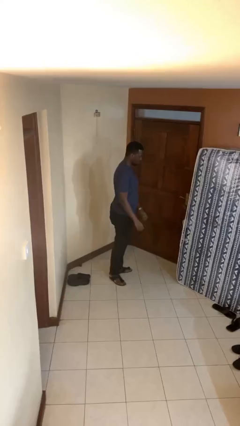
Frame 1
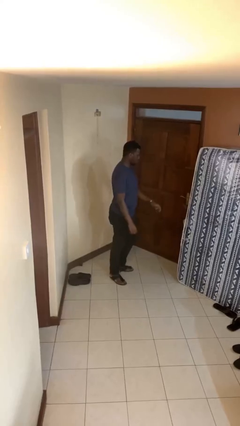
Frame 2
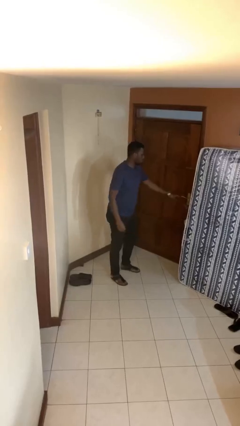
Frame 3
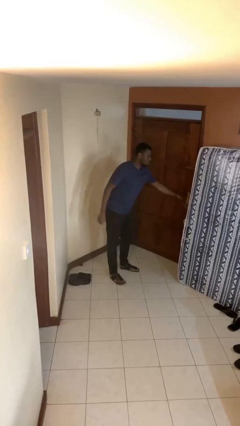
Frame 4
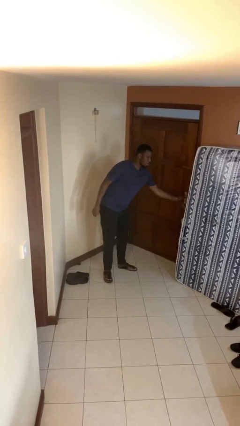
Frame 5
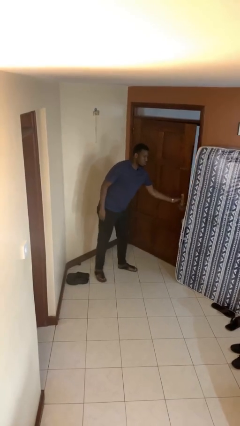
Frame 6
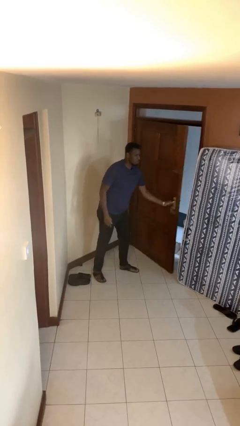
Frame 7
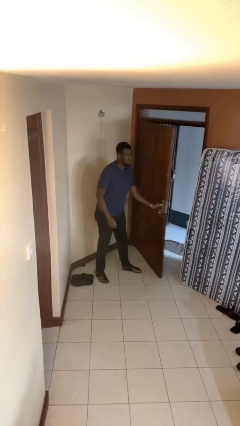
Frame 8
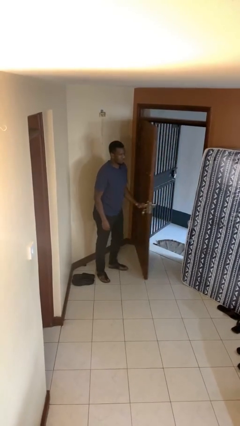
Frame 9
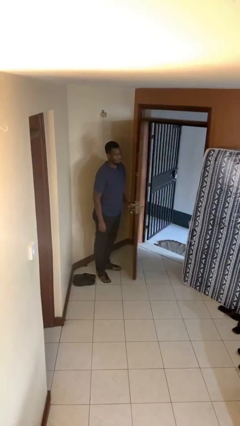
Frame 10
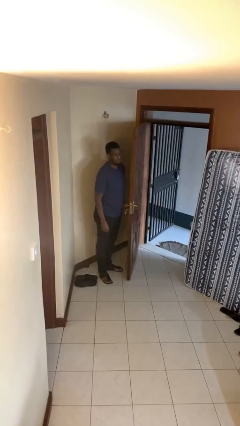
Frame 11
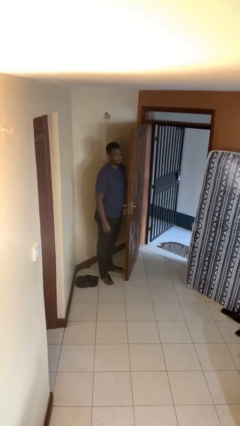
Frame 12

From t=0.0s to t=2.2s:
person opens facility door

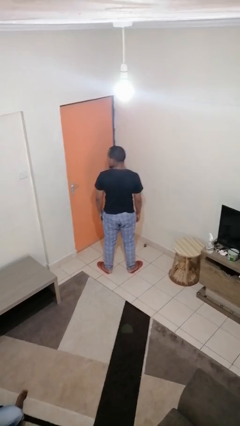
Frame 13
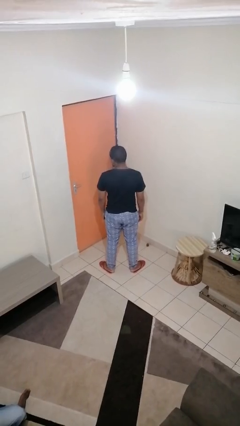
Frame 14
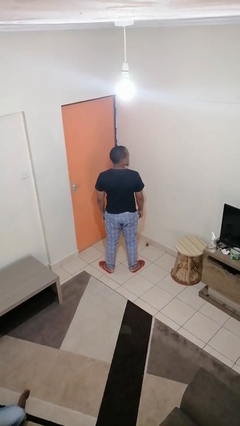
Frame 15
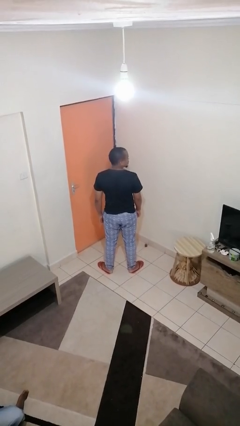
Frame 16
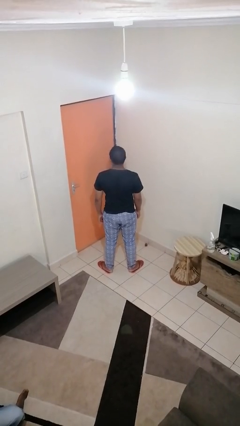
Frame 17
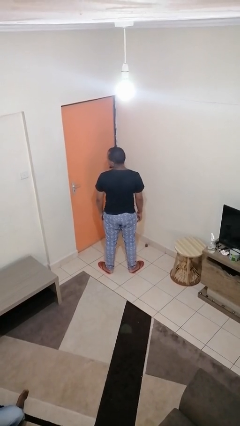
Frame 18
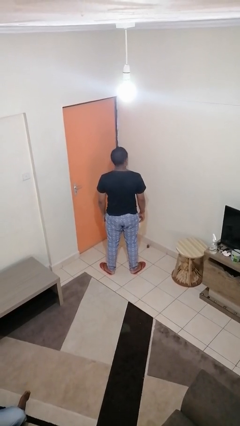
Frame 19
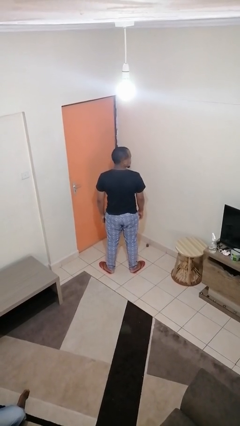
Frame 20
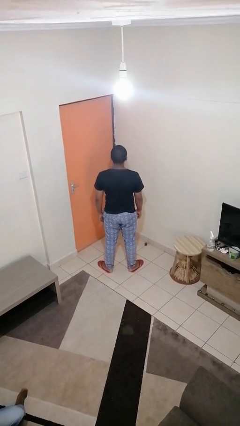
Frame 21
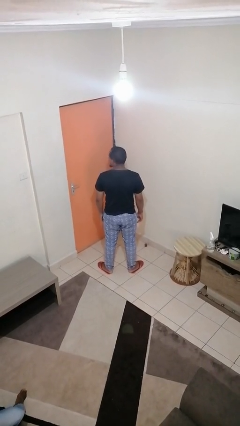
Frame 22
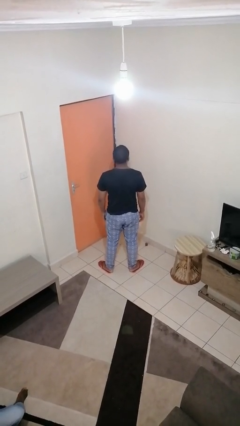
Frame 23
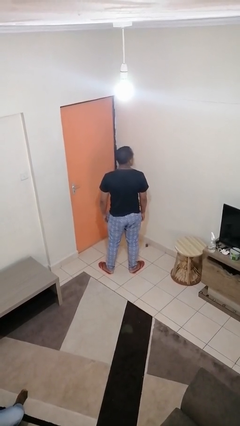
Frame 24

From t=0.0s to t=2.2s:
person shakes head

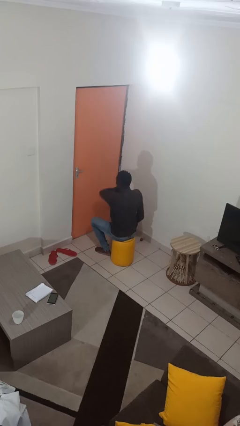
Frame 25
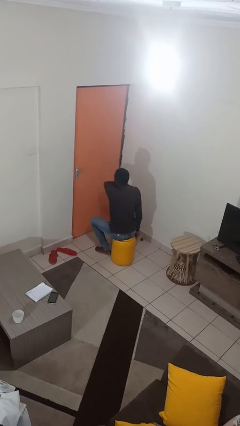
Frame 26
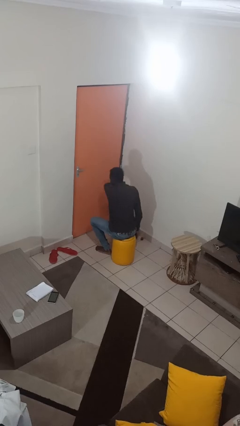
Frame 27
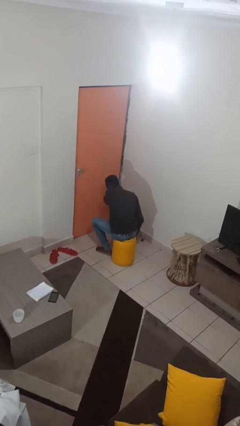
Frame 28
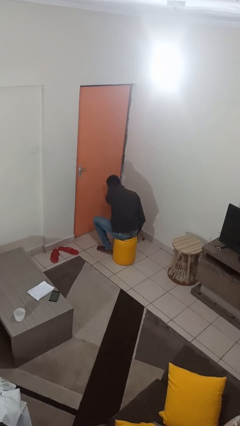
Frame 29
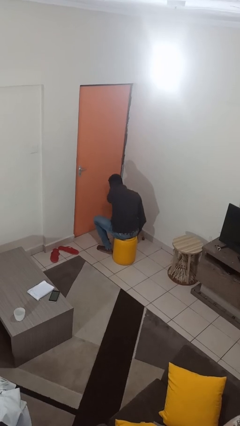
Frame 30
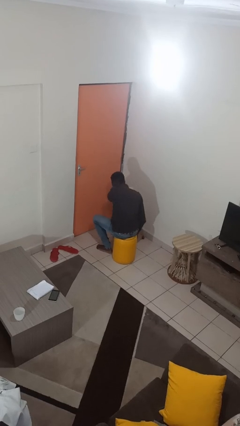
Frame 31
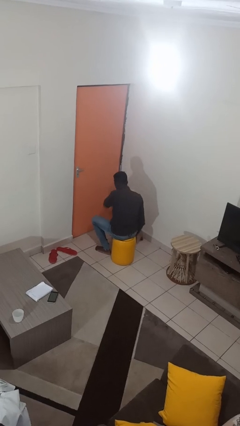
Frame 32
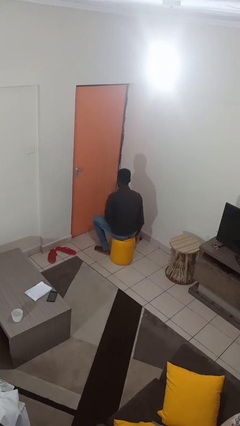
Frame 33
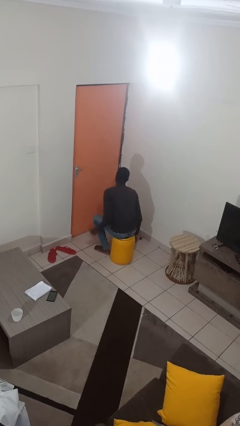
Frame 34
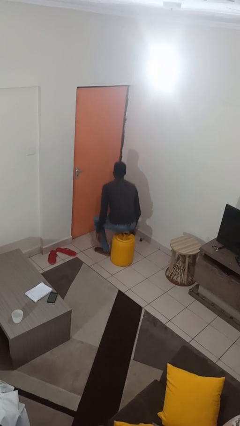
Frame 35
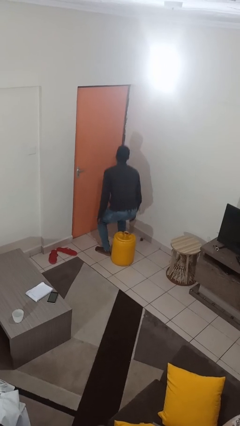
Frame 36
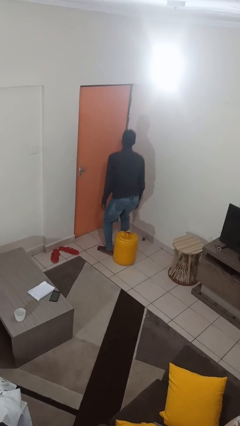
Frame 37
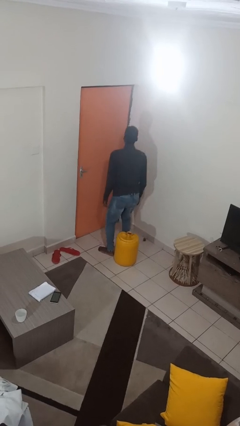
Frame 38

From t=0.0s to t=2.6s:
person sneezes into arm

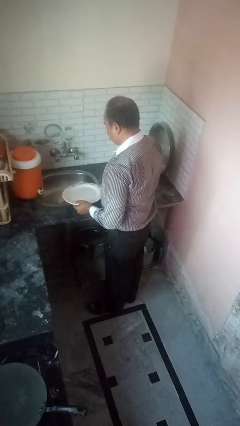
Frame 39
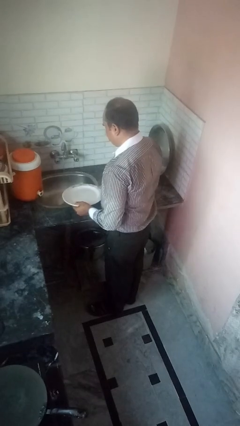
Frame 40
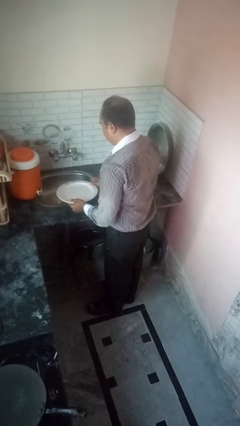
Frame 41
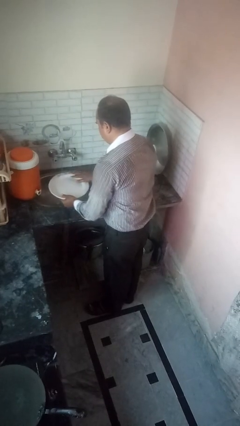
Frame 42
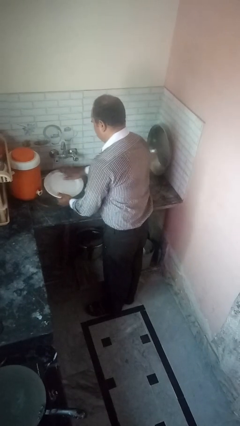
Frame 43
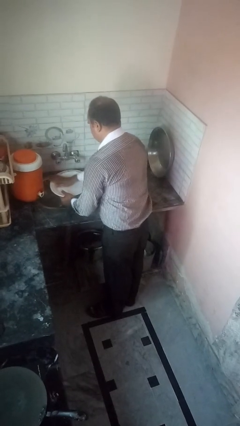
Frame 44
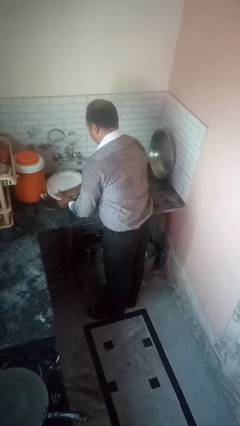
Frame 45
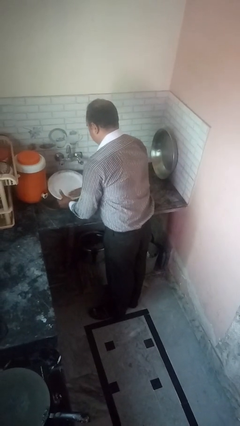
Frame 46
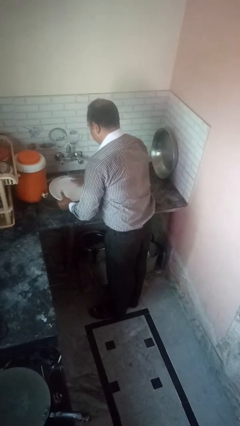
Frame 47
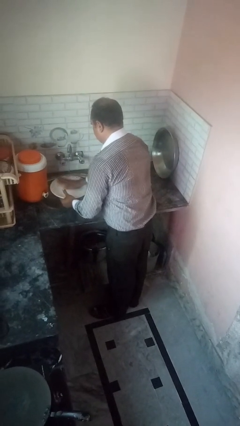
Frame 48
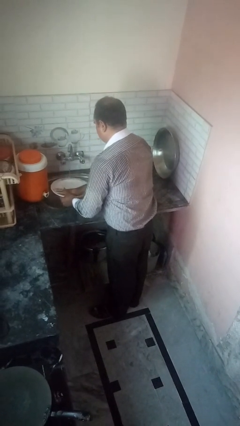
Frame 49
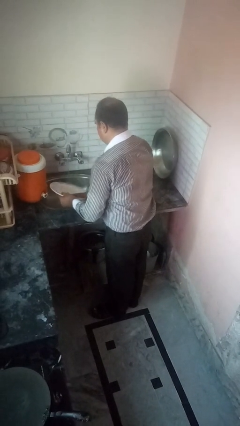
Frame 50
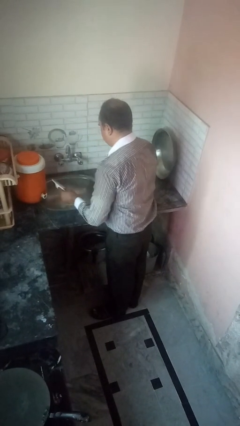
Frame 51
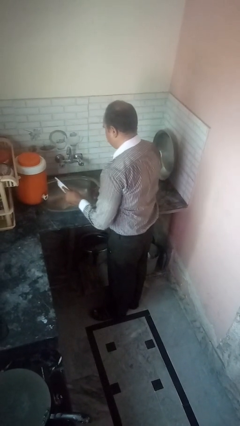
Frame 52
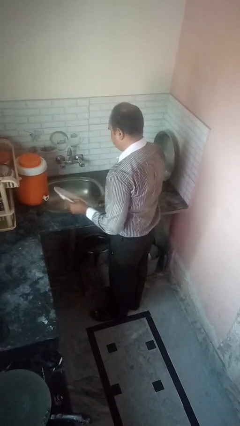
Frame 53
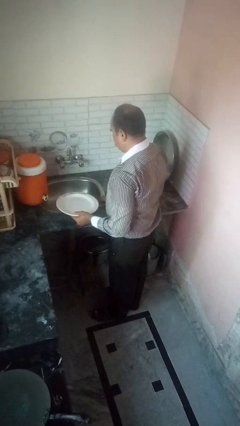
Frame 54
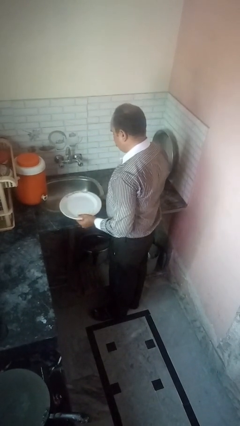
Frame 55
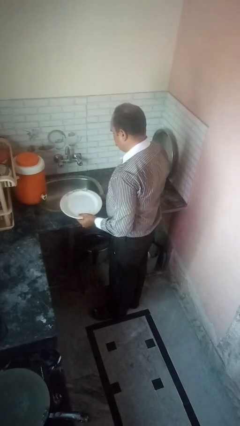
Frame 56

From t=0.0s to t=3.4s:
person washes dish

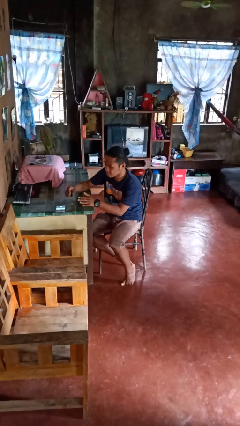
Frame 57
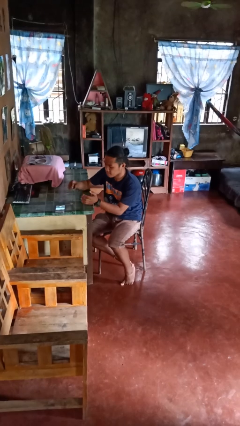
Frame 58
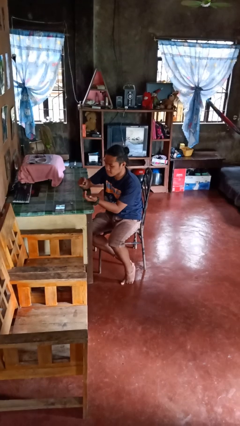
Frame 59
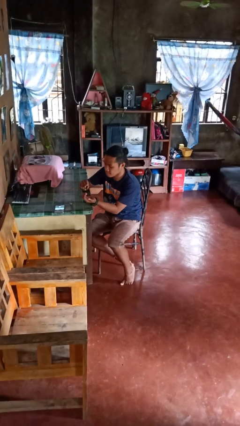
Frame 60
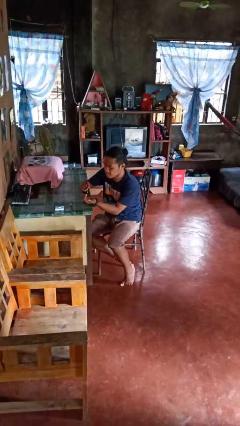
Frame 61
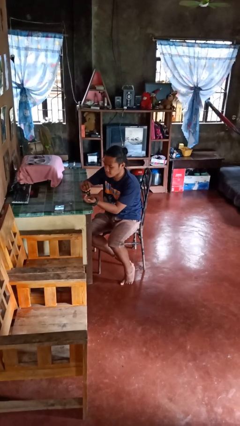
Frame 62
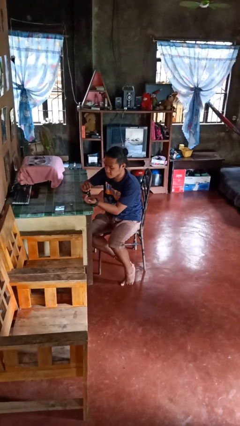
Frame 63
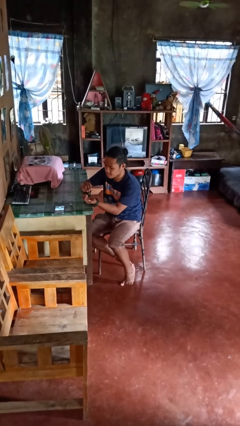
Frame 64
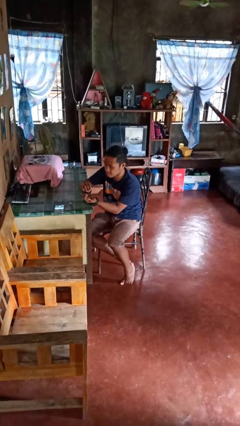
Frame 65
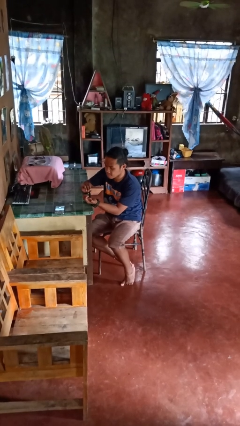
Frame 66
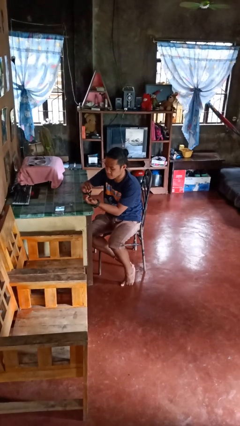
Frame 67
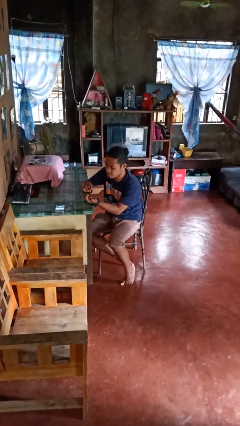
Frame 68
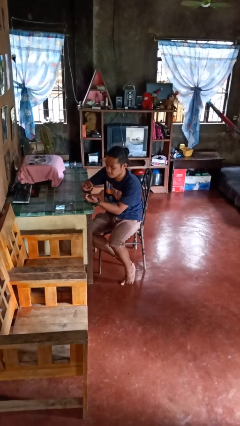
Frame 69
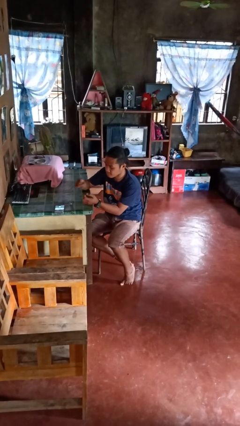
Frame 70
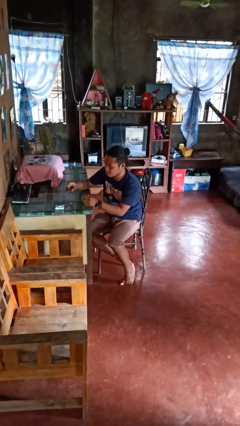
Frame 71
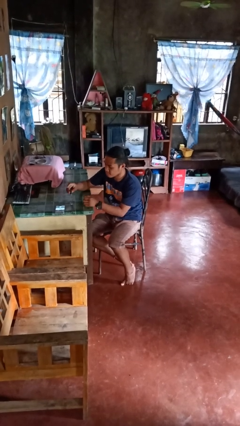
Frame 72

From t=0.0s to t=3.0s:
person paints fingernails

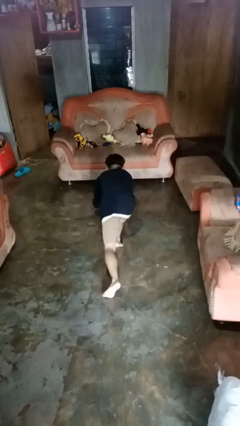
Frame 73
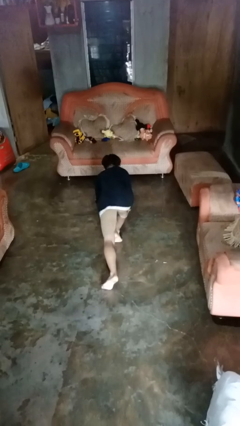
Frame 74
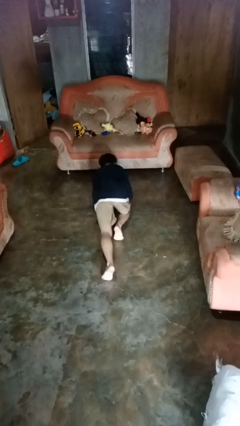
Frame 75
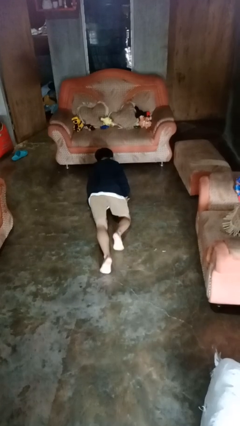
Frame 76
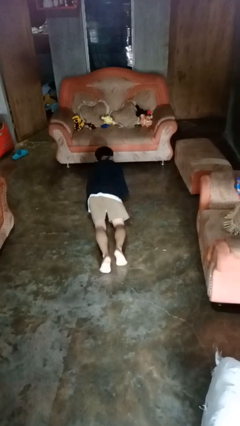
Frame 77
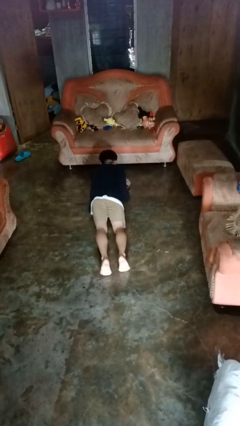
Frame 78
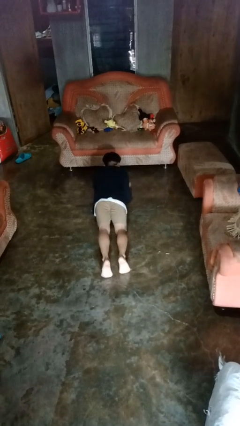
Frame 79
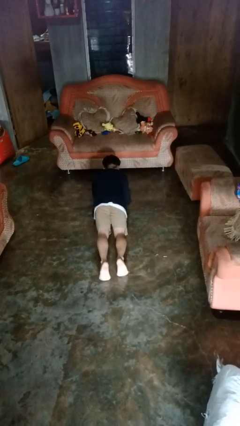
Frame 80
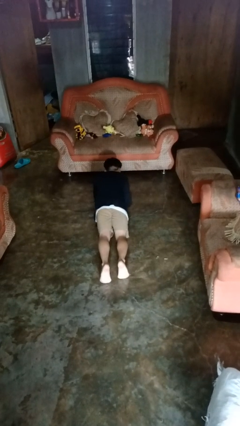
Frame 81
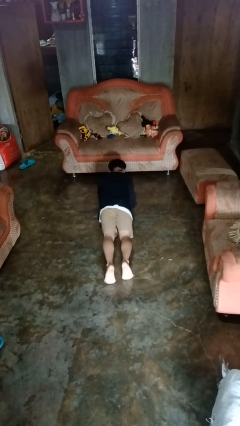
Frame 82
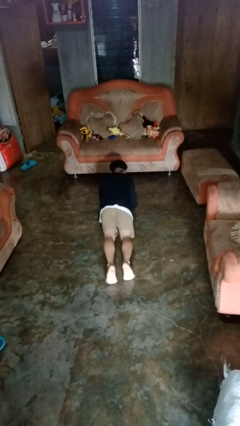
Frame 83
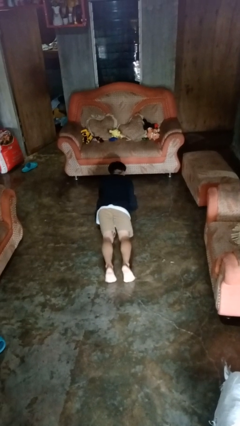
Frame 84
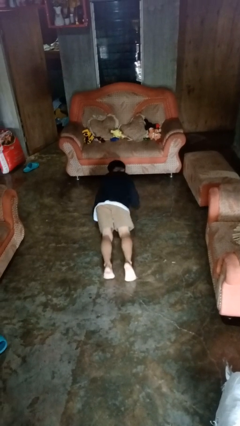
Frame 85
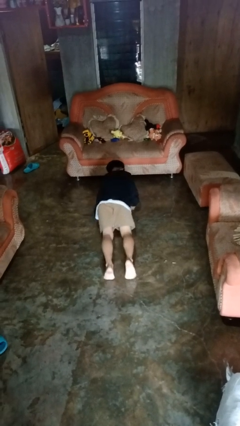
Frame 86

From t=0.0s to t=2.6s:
person exercises with plank

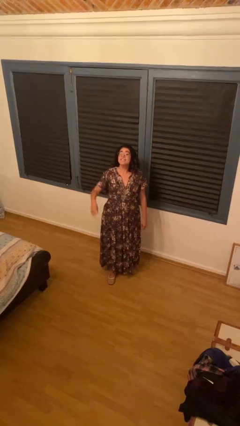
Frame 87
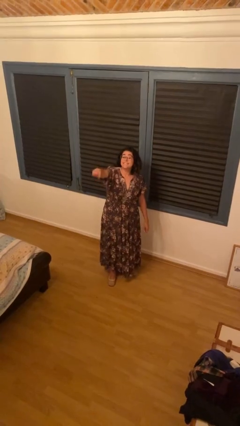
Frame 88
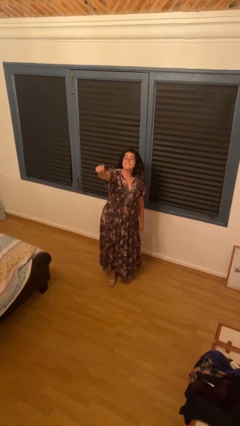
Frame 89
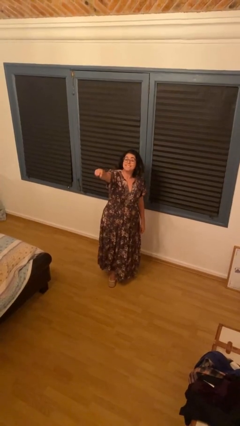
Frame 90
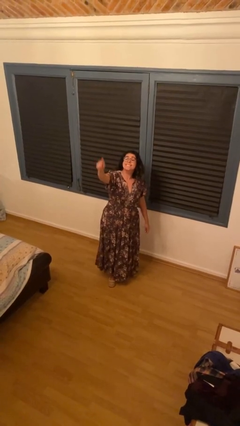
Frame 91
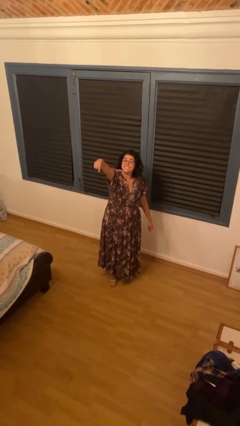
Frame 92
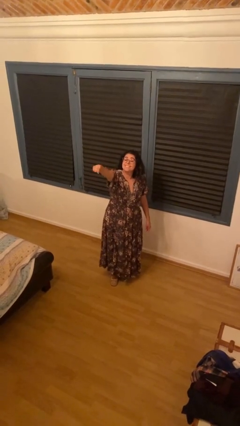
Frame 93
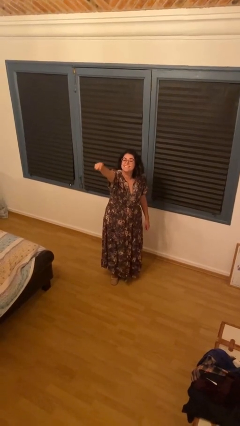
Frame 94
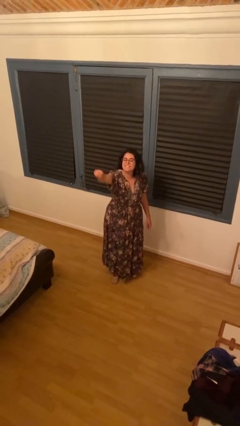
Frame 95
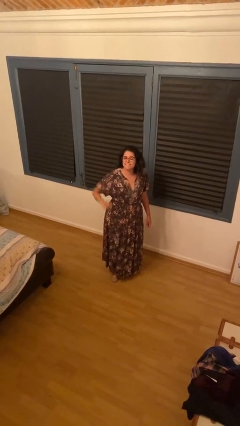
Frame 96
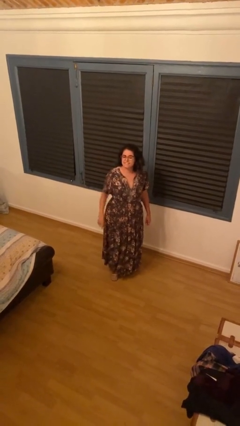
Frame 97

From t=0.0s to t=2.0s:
person points at person
